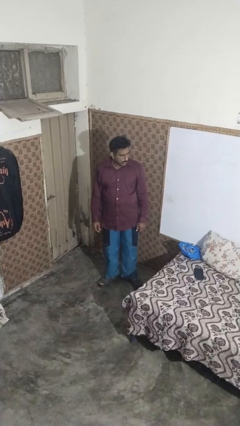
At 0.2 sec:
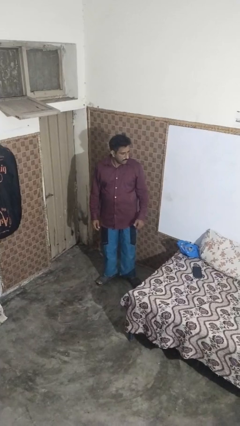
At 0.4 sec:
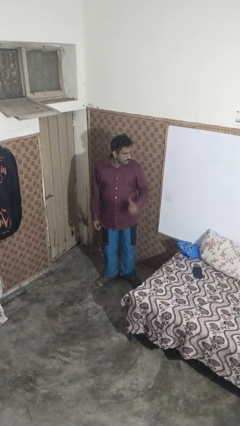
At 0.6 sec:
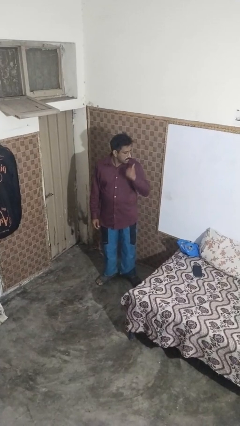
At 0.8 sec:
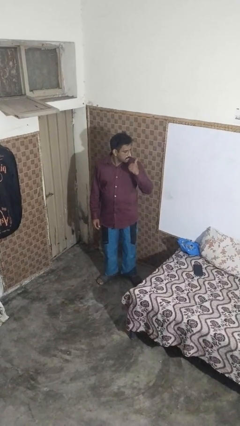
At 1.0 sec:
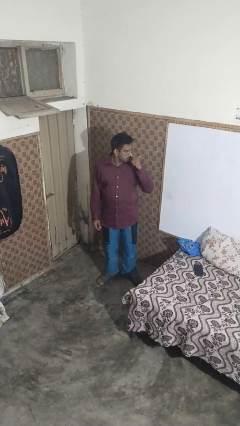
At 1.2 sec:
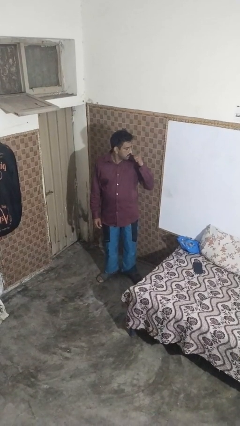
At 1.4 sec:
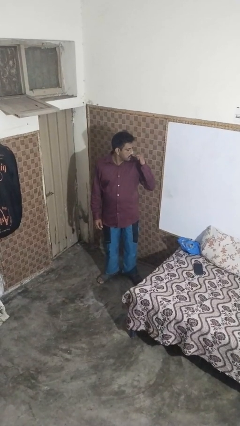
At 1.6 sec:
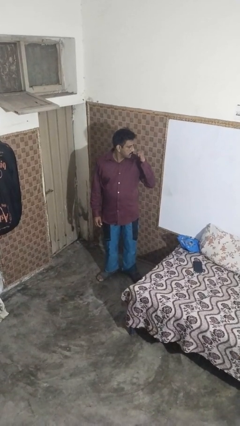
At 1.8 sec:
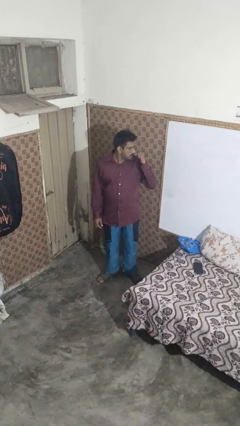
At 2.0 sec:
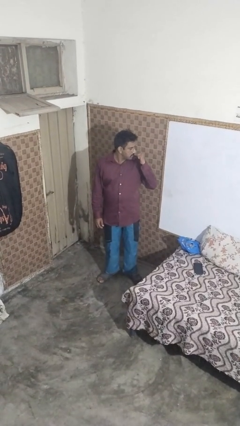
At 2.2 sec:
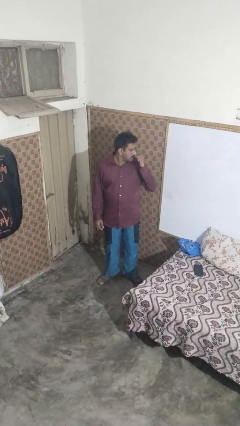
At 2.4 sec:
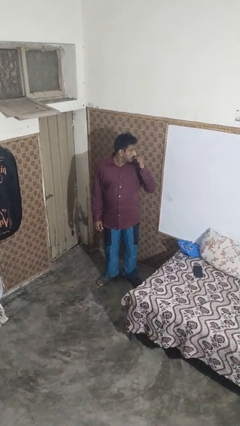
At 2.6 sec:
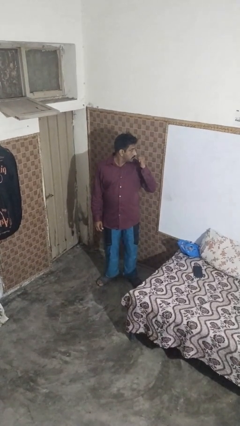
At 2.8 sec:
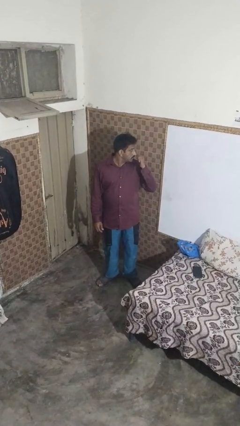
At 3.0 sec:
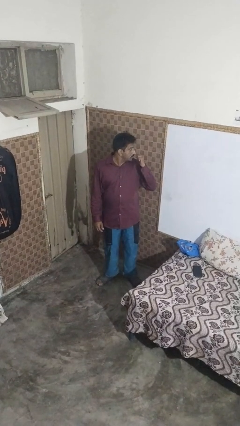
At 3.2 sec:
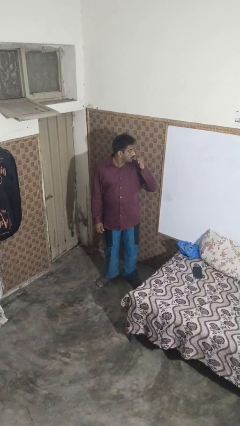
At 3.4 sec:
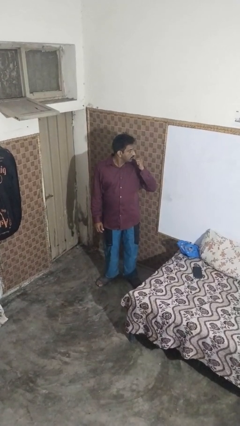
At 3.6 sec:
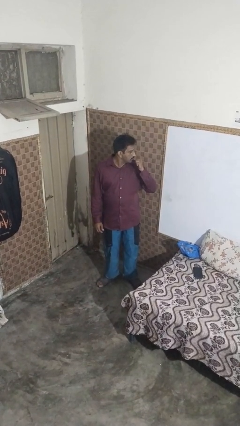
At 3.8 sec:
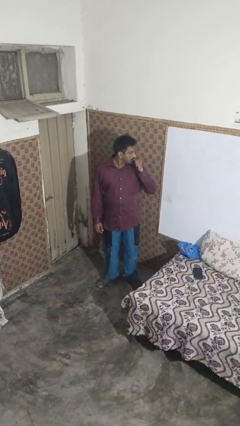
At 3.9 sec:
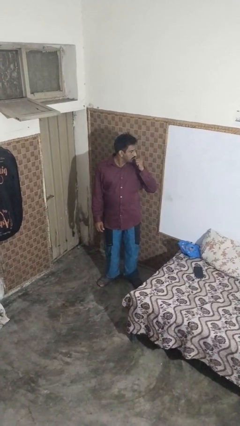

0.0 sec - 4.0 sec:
person gestures behind me

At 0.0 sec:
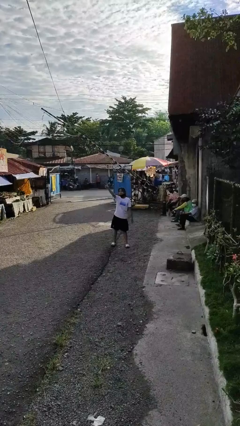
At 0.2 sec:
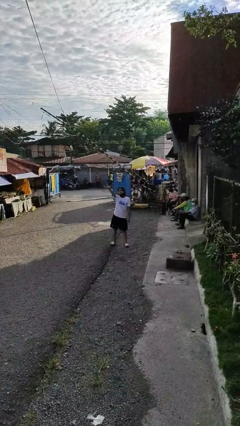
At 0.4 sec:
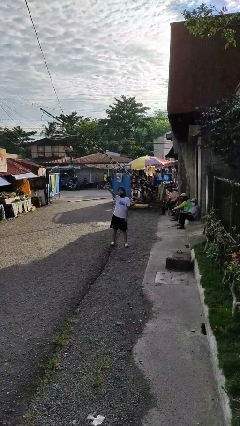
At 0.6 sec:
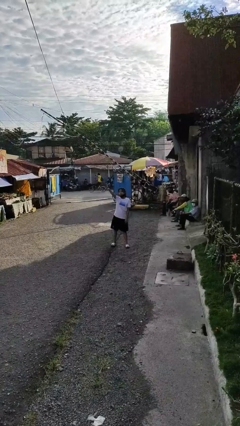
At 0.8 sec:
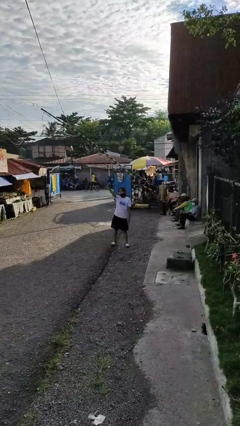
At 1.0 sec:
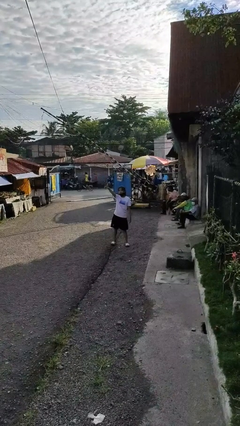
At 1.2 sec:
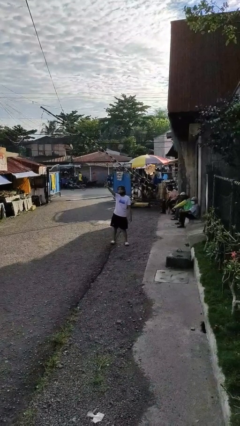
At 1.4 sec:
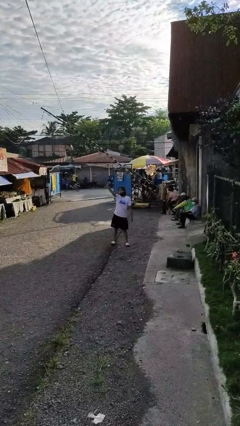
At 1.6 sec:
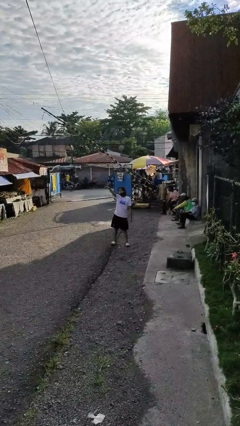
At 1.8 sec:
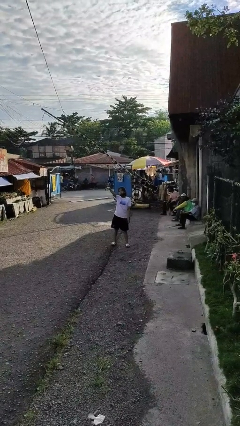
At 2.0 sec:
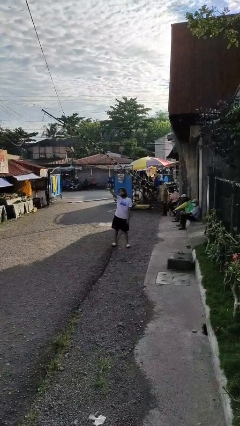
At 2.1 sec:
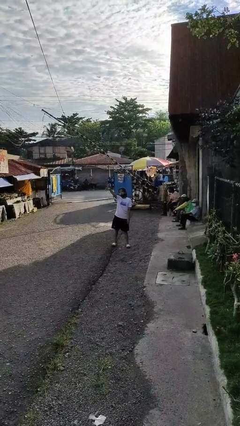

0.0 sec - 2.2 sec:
person points at person

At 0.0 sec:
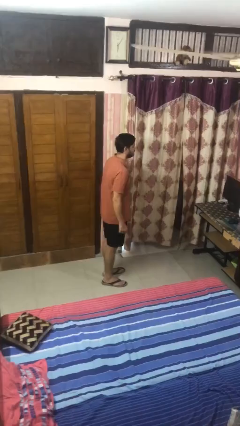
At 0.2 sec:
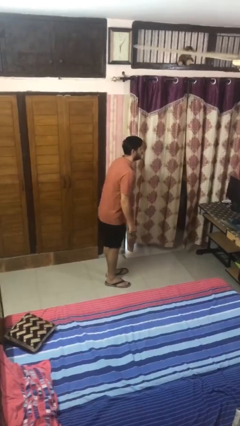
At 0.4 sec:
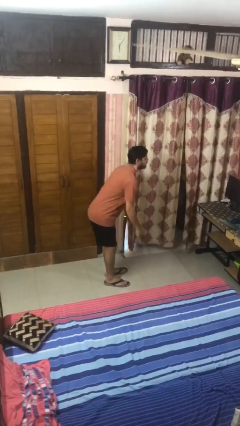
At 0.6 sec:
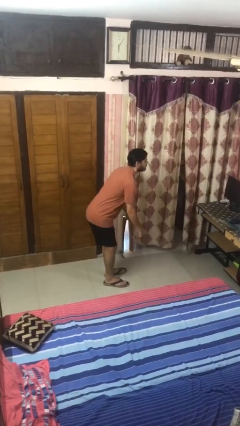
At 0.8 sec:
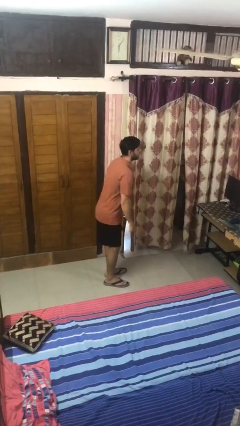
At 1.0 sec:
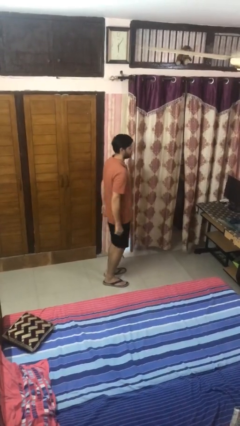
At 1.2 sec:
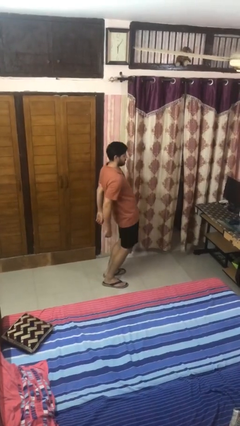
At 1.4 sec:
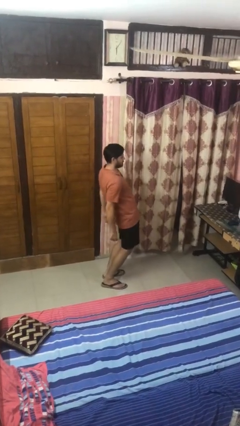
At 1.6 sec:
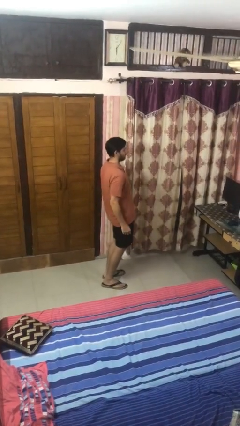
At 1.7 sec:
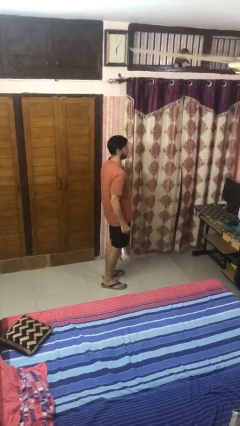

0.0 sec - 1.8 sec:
person wiggles hips

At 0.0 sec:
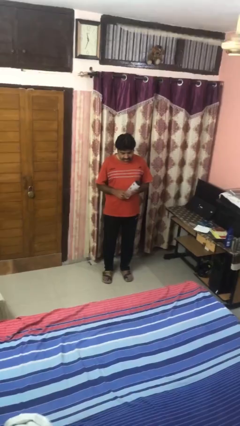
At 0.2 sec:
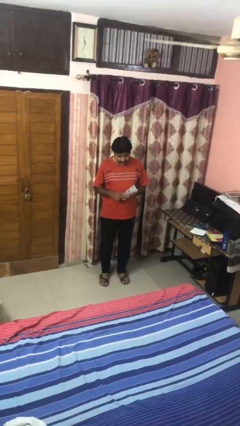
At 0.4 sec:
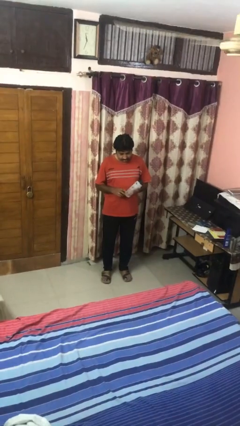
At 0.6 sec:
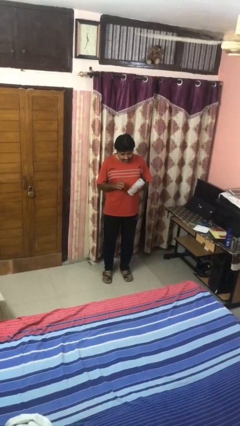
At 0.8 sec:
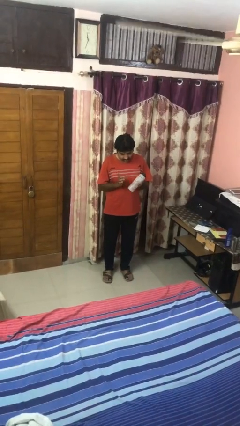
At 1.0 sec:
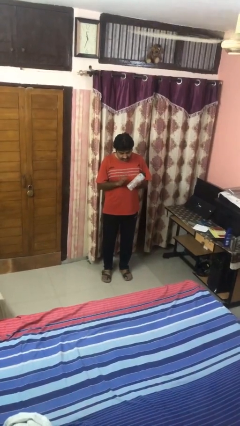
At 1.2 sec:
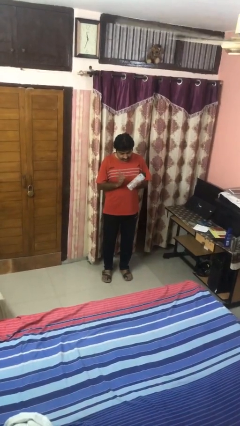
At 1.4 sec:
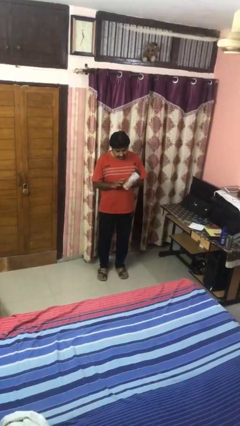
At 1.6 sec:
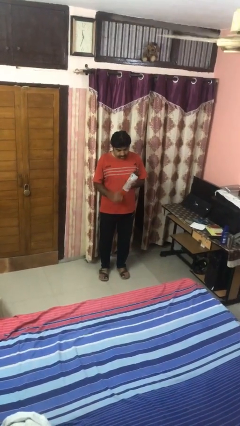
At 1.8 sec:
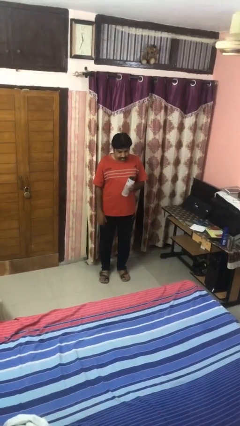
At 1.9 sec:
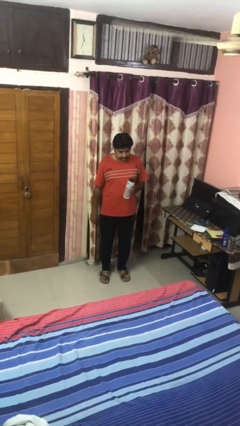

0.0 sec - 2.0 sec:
person taps object with finger

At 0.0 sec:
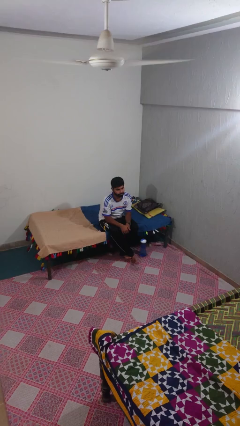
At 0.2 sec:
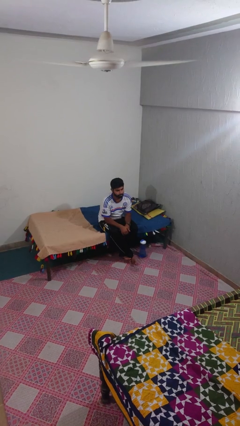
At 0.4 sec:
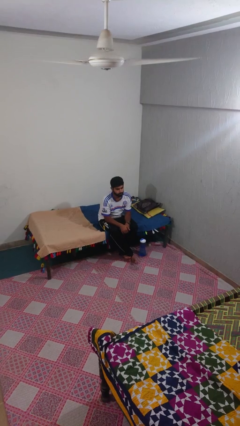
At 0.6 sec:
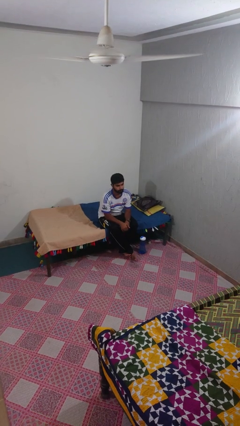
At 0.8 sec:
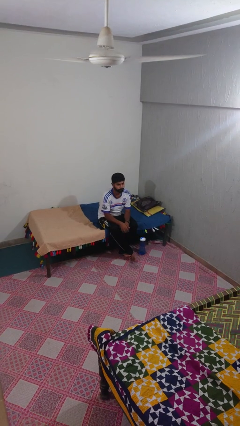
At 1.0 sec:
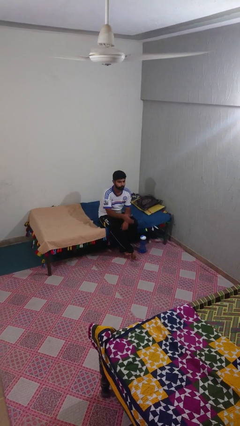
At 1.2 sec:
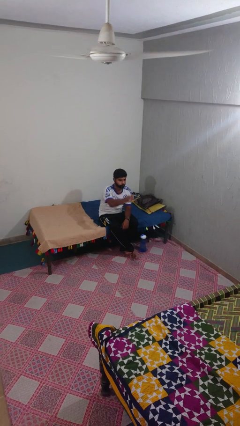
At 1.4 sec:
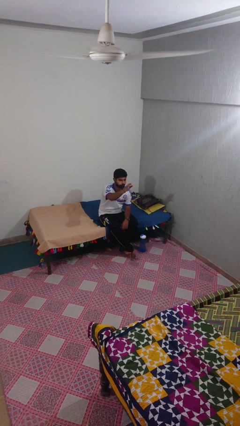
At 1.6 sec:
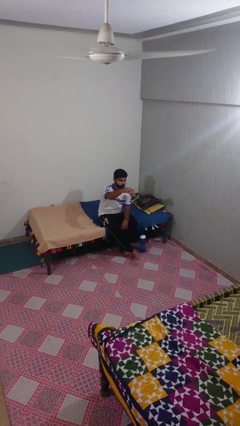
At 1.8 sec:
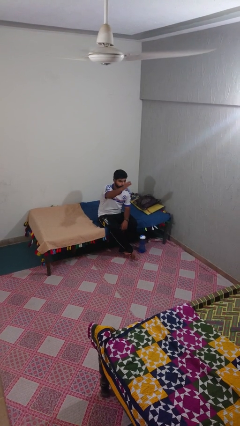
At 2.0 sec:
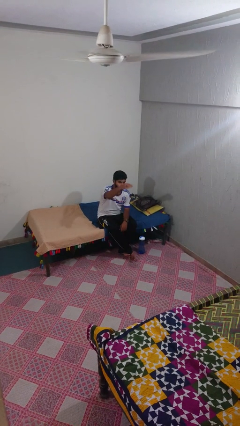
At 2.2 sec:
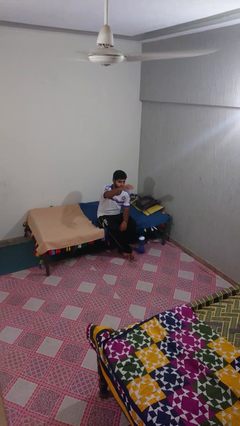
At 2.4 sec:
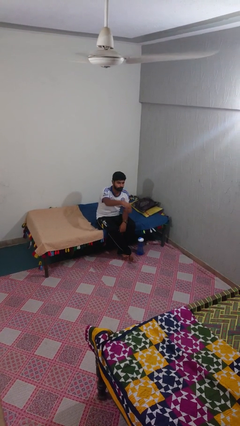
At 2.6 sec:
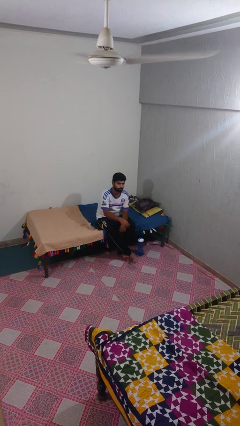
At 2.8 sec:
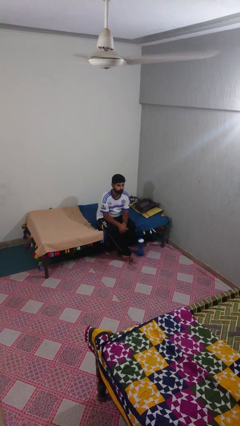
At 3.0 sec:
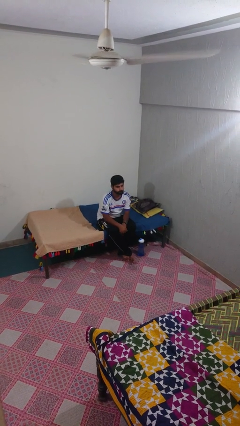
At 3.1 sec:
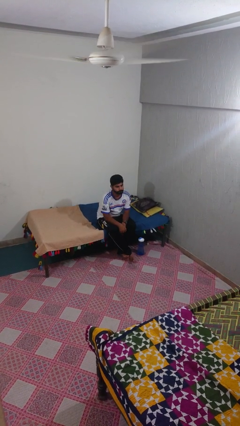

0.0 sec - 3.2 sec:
person gestures come here

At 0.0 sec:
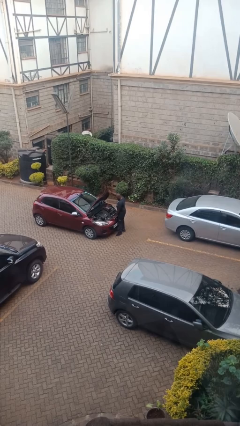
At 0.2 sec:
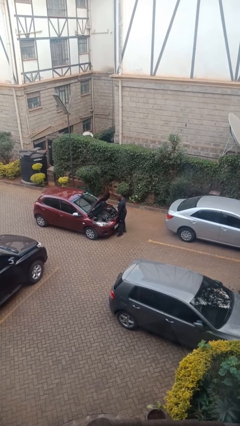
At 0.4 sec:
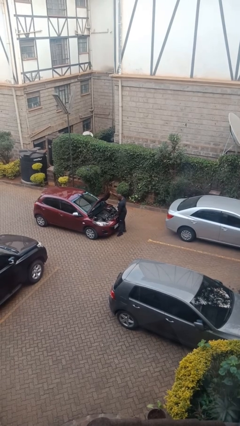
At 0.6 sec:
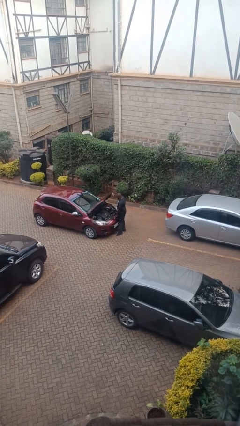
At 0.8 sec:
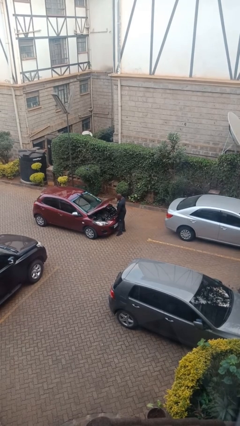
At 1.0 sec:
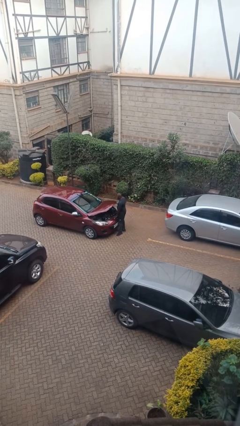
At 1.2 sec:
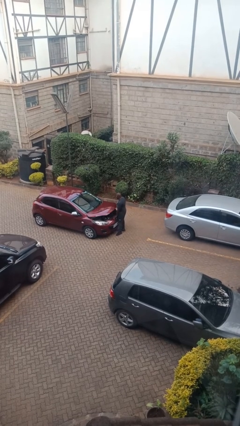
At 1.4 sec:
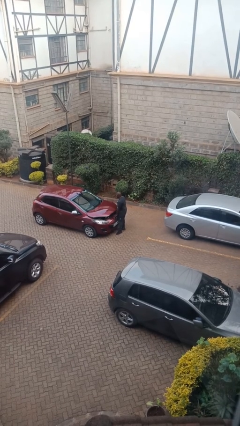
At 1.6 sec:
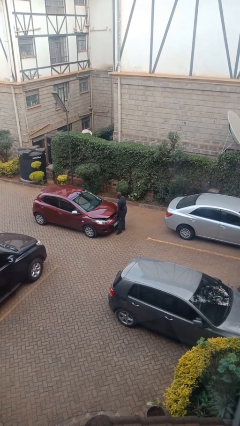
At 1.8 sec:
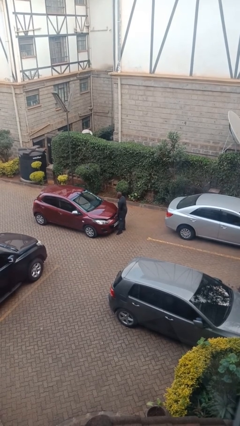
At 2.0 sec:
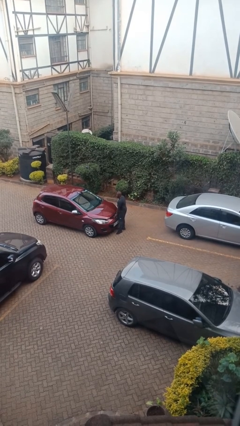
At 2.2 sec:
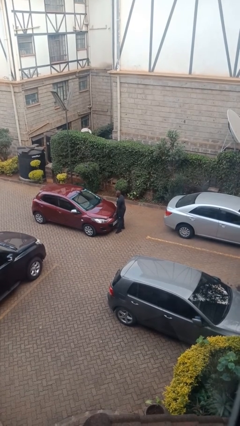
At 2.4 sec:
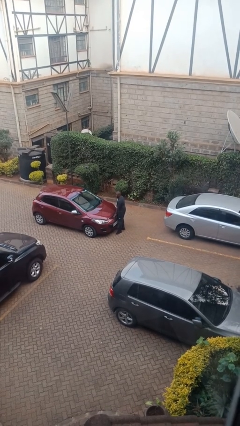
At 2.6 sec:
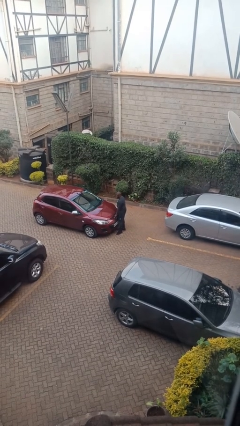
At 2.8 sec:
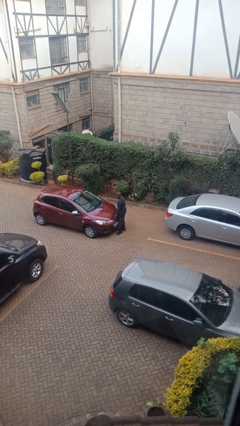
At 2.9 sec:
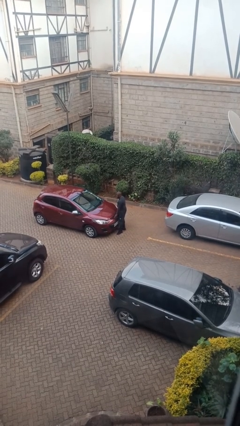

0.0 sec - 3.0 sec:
person closes car hood

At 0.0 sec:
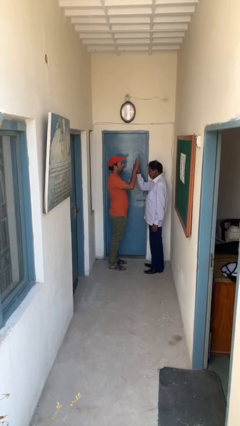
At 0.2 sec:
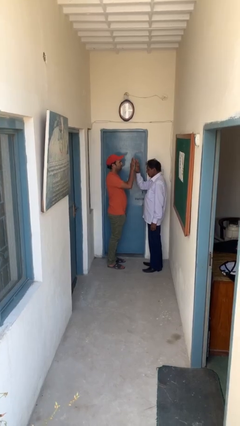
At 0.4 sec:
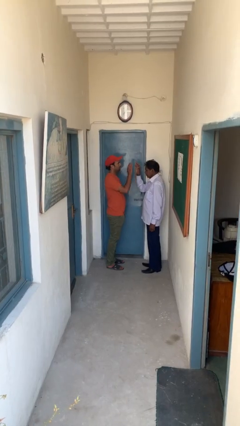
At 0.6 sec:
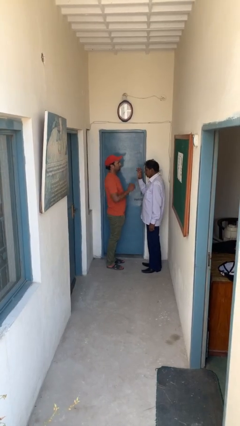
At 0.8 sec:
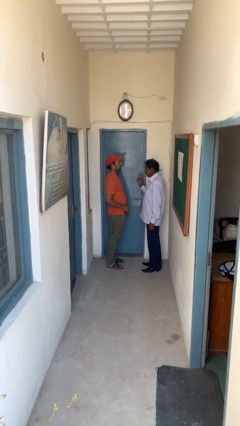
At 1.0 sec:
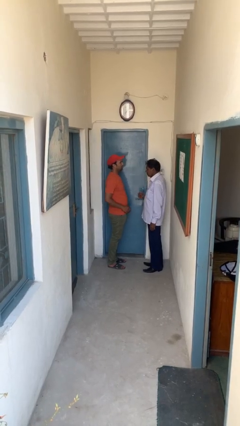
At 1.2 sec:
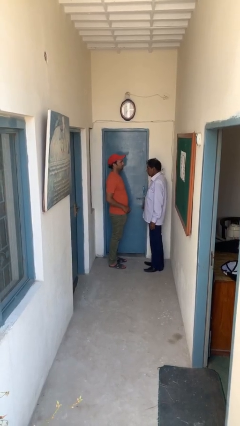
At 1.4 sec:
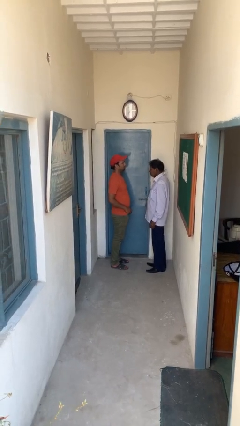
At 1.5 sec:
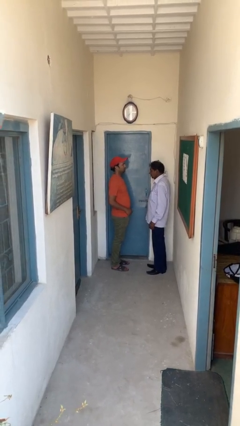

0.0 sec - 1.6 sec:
person highfives hand
